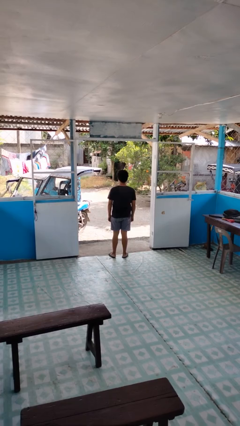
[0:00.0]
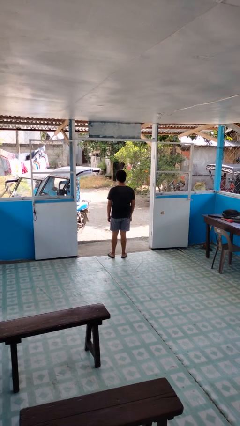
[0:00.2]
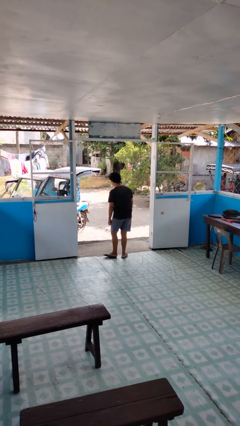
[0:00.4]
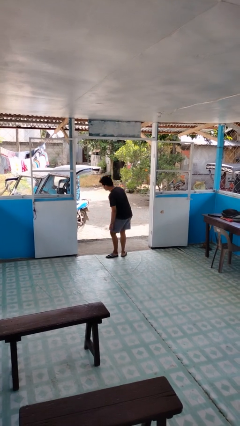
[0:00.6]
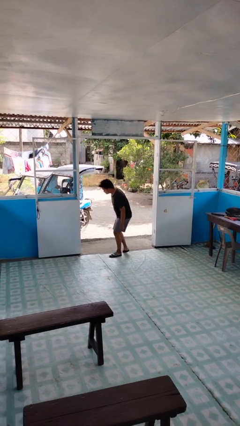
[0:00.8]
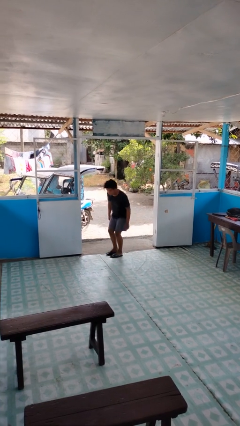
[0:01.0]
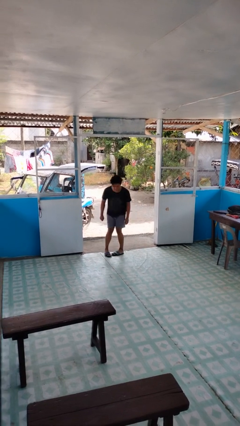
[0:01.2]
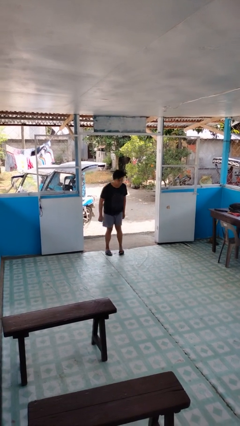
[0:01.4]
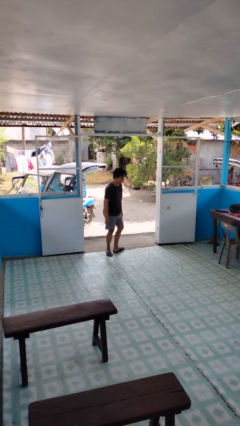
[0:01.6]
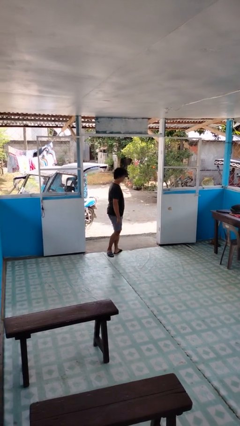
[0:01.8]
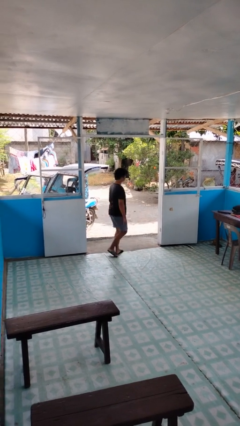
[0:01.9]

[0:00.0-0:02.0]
person twirls

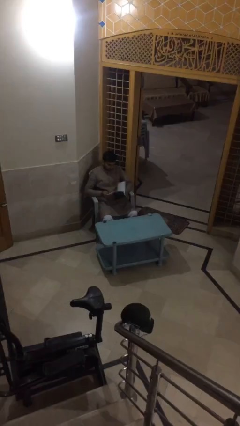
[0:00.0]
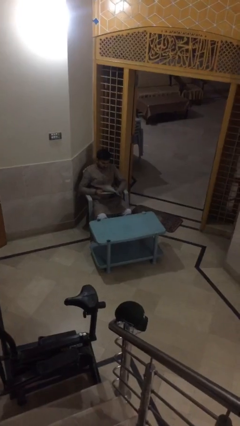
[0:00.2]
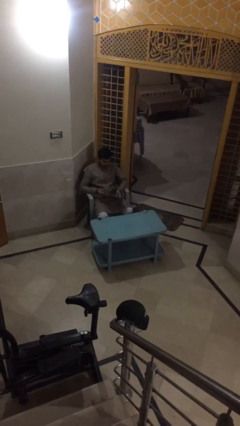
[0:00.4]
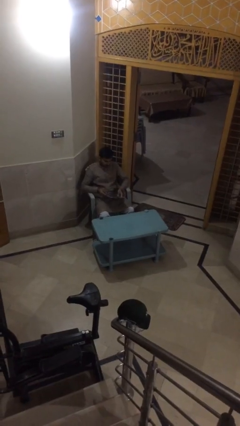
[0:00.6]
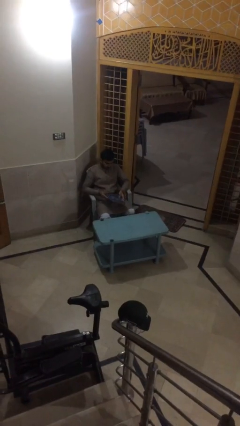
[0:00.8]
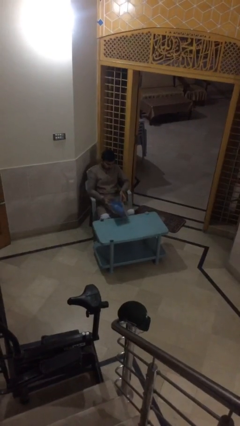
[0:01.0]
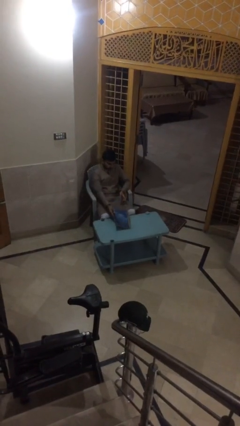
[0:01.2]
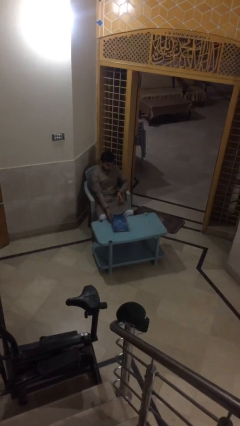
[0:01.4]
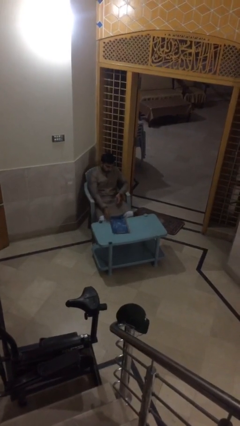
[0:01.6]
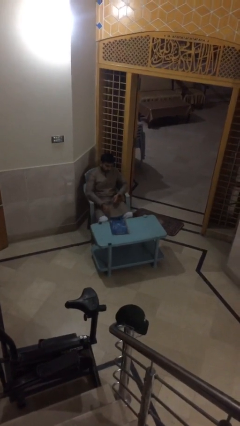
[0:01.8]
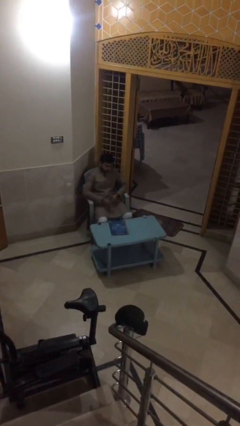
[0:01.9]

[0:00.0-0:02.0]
person puts down object on table

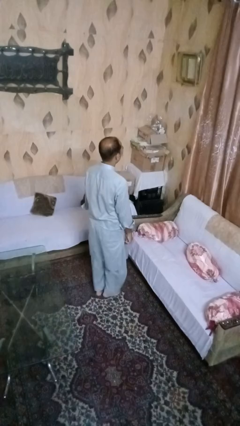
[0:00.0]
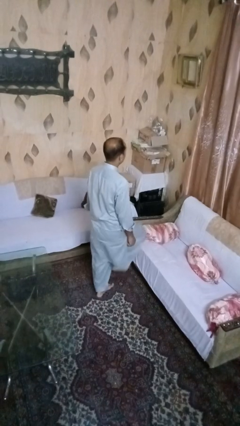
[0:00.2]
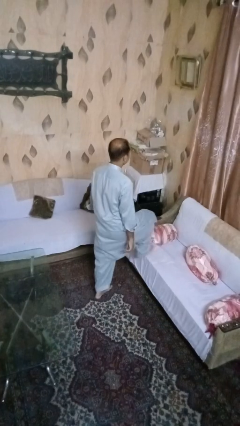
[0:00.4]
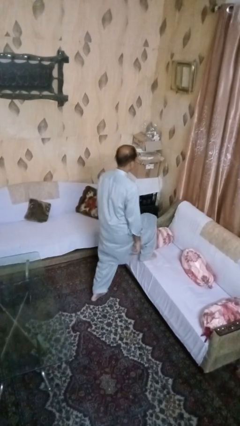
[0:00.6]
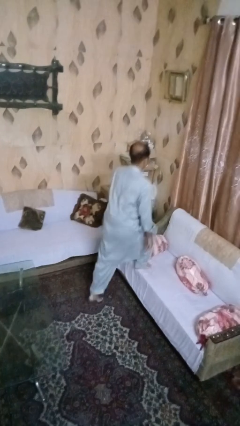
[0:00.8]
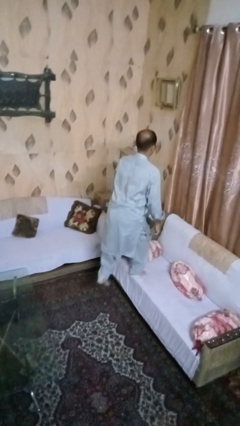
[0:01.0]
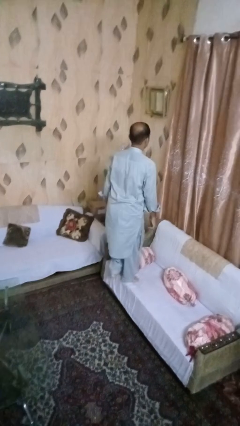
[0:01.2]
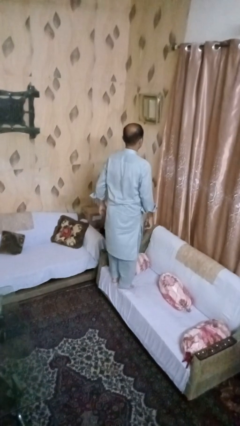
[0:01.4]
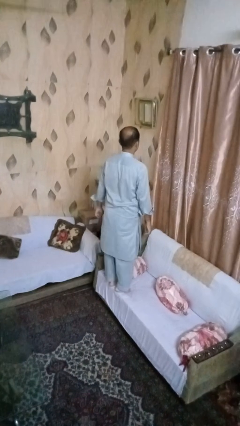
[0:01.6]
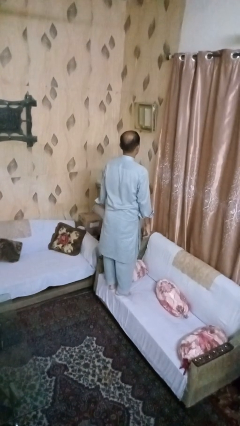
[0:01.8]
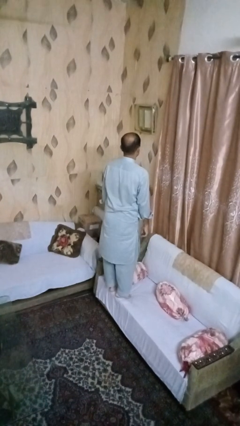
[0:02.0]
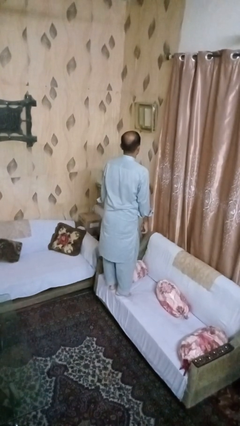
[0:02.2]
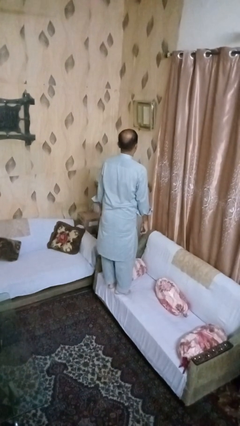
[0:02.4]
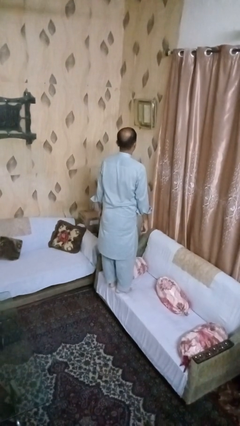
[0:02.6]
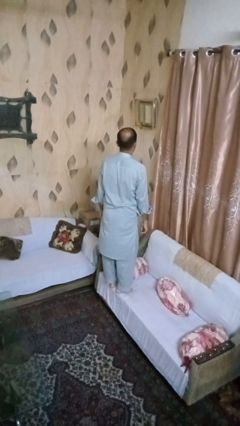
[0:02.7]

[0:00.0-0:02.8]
person climbs on couch

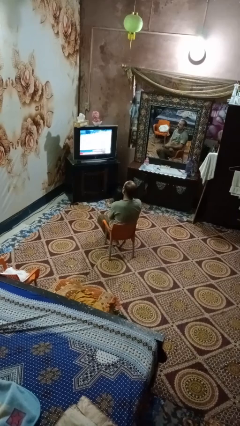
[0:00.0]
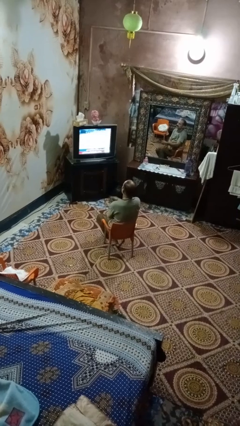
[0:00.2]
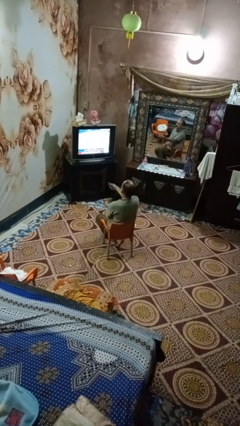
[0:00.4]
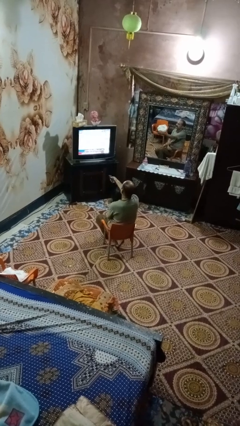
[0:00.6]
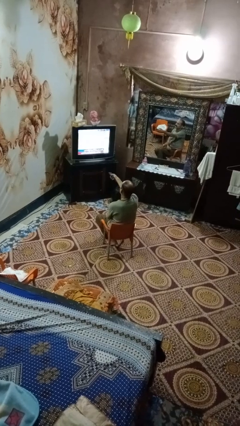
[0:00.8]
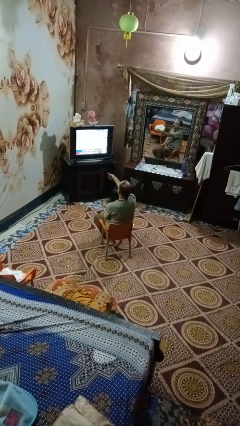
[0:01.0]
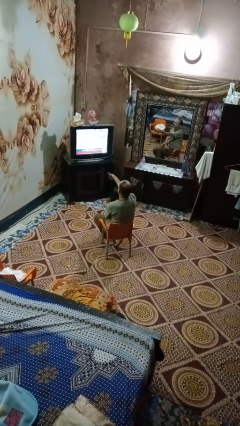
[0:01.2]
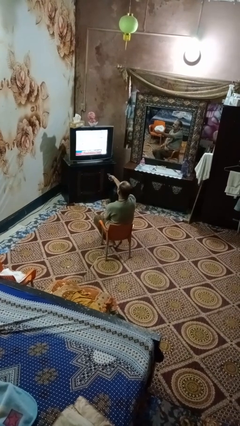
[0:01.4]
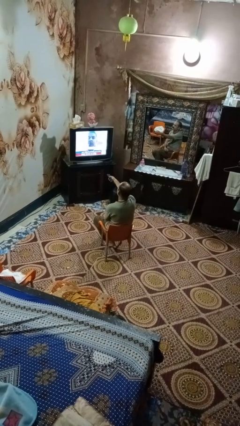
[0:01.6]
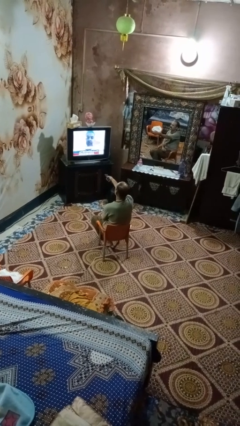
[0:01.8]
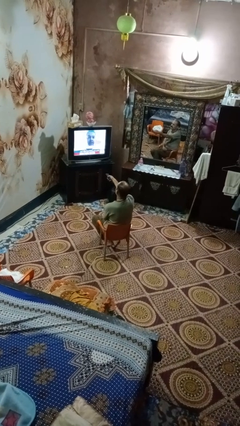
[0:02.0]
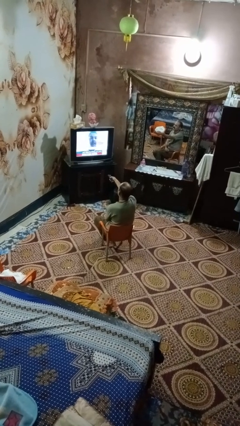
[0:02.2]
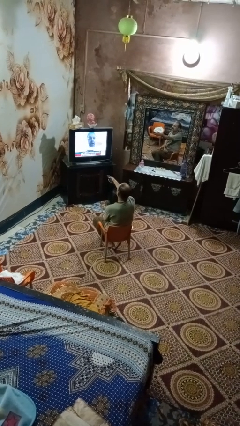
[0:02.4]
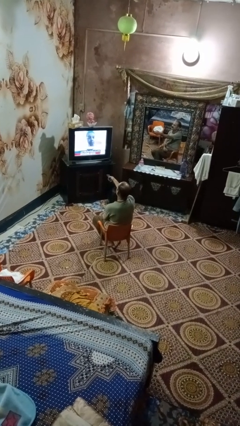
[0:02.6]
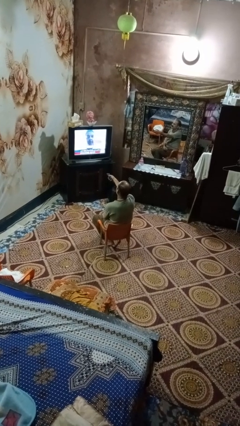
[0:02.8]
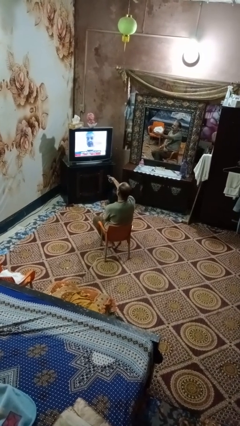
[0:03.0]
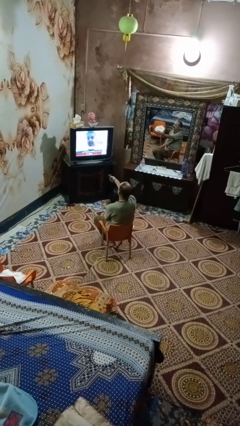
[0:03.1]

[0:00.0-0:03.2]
person uses television remote

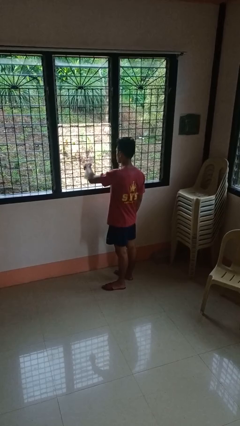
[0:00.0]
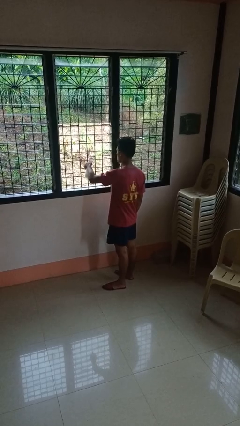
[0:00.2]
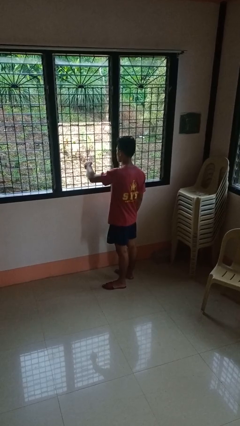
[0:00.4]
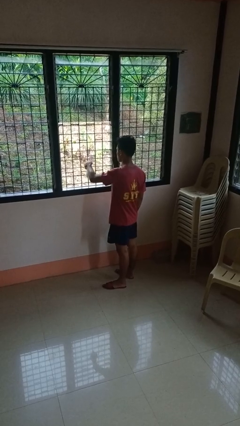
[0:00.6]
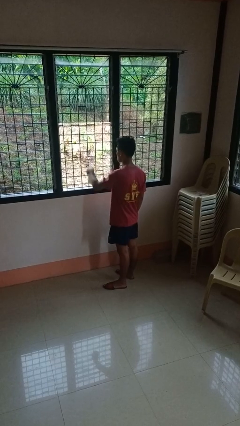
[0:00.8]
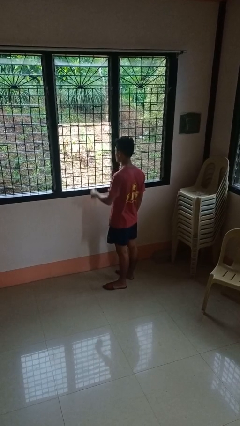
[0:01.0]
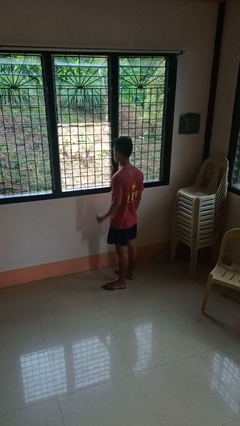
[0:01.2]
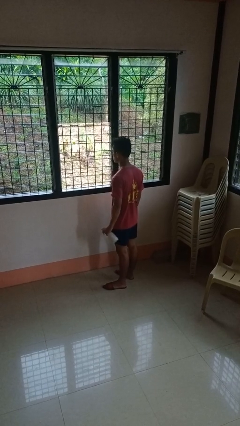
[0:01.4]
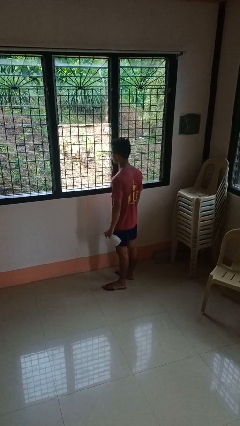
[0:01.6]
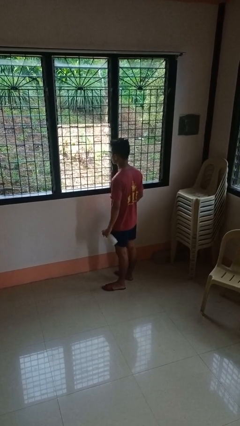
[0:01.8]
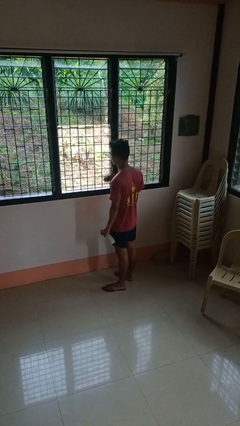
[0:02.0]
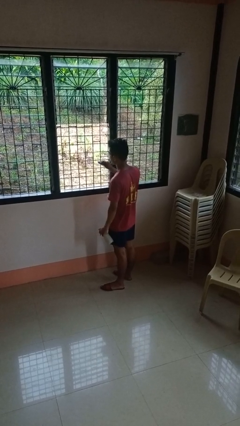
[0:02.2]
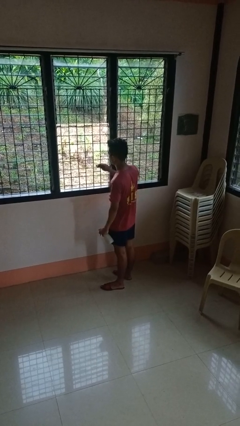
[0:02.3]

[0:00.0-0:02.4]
person sprays from bottle

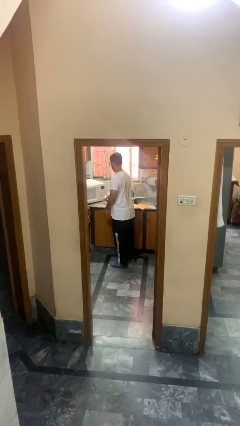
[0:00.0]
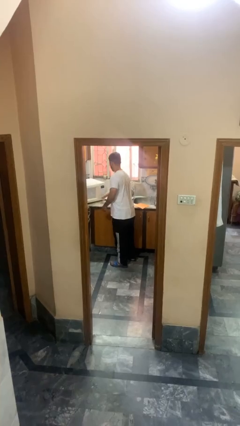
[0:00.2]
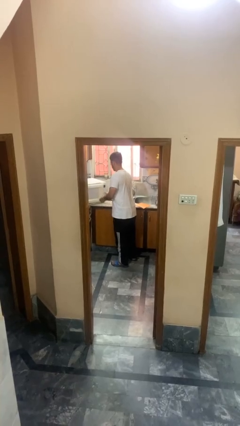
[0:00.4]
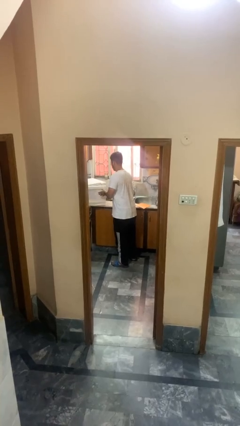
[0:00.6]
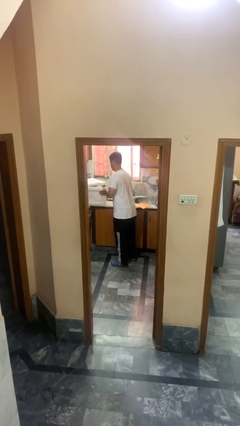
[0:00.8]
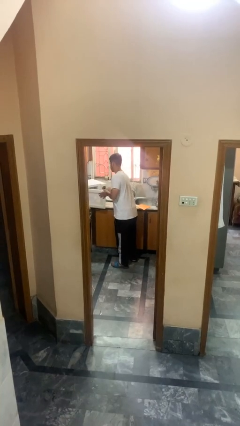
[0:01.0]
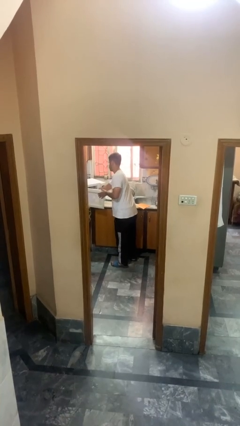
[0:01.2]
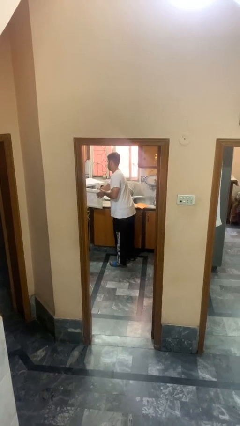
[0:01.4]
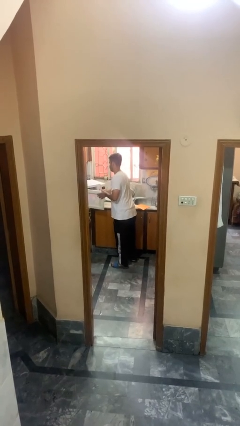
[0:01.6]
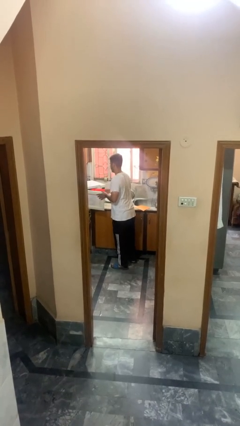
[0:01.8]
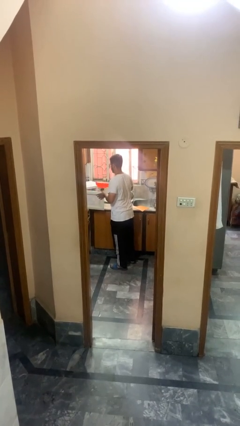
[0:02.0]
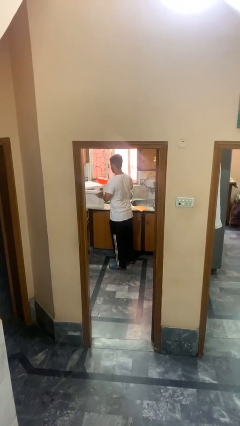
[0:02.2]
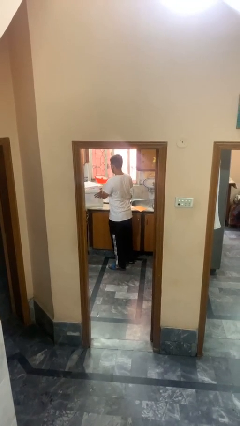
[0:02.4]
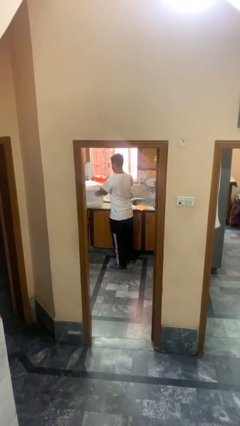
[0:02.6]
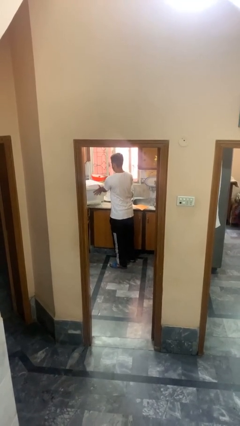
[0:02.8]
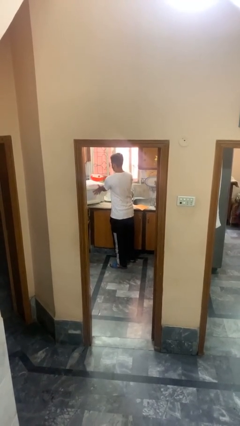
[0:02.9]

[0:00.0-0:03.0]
person takes object from microwave

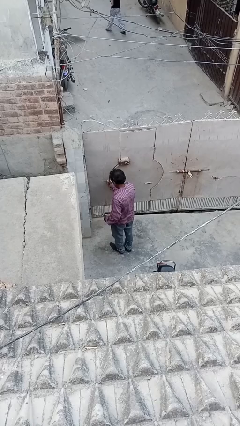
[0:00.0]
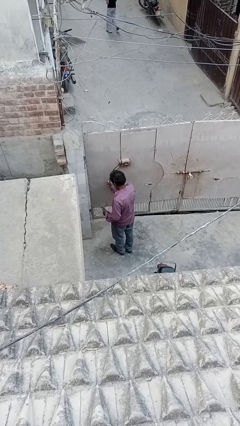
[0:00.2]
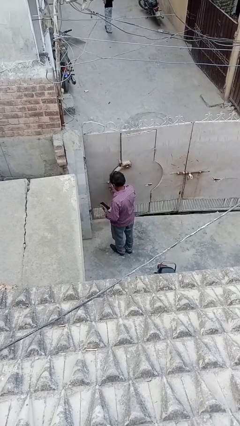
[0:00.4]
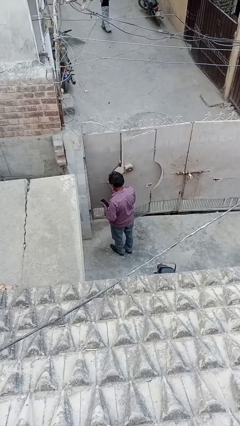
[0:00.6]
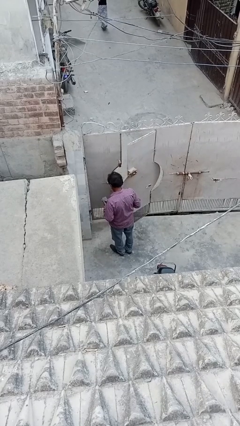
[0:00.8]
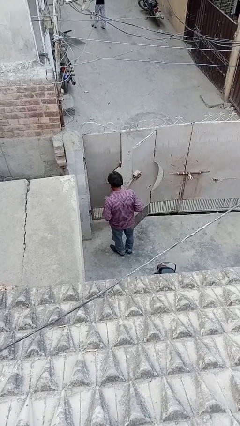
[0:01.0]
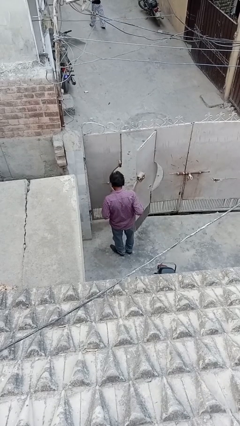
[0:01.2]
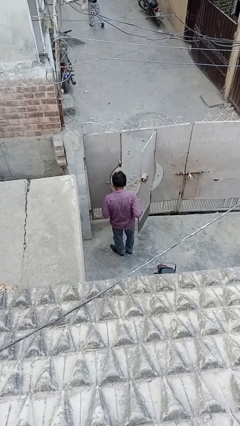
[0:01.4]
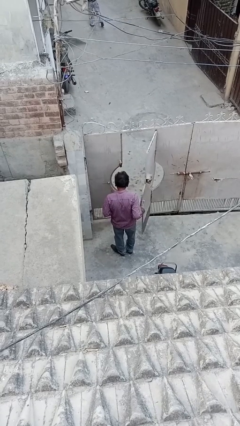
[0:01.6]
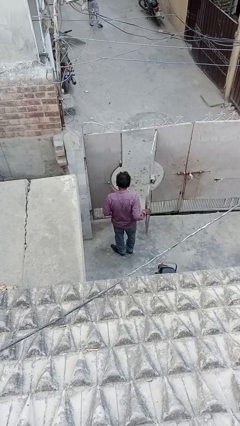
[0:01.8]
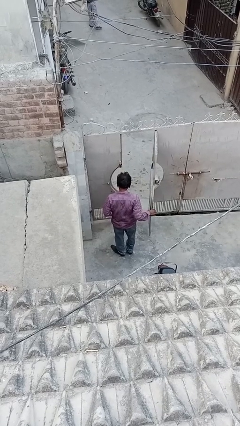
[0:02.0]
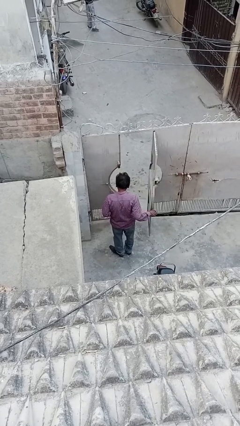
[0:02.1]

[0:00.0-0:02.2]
person opens facility door
